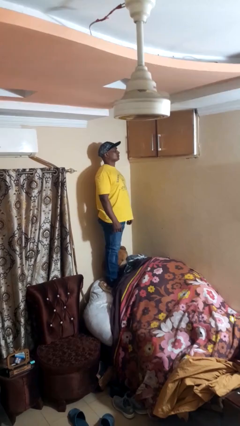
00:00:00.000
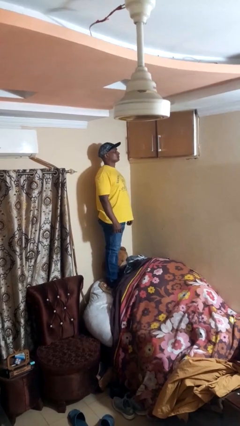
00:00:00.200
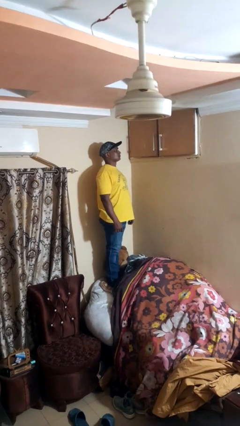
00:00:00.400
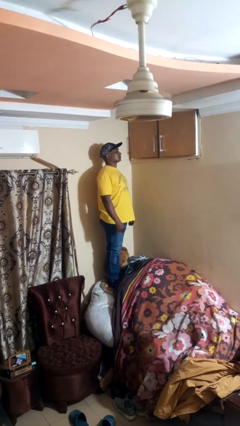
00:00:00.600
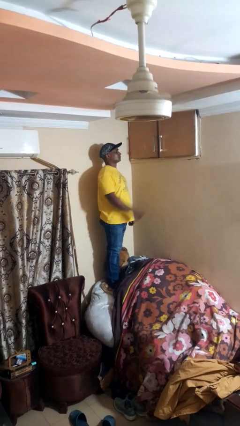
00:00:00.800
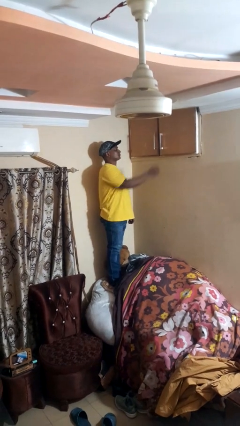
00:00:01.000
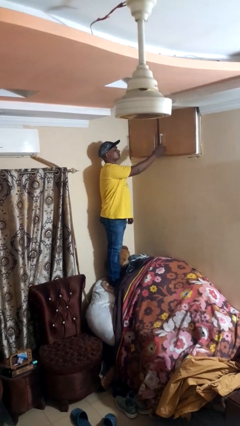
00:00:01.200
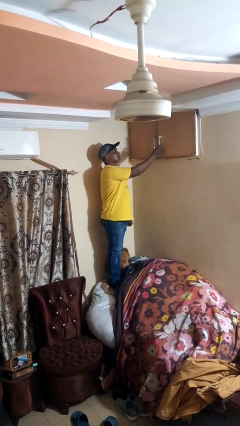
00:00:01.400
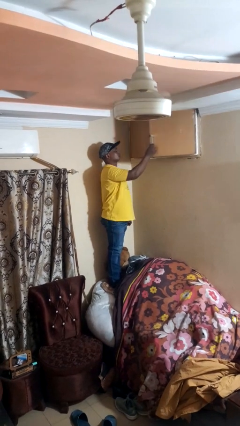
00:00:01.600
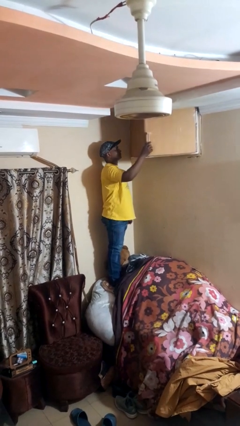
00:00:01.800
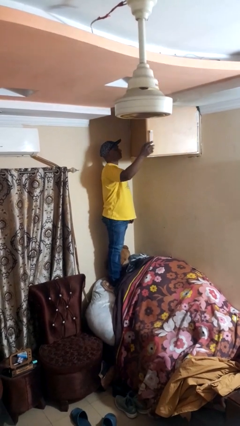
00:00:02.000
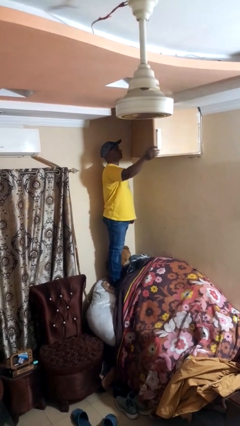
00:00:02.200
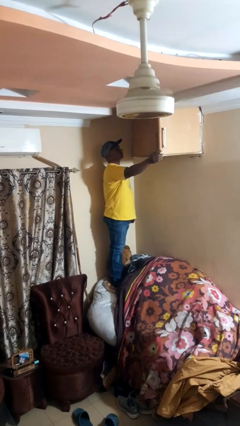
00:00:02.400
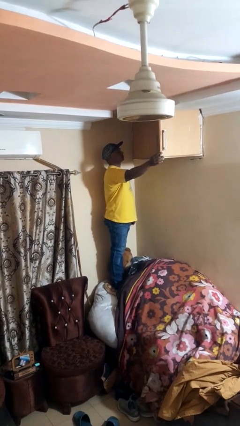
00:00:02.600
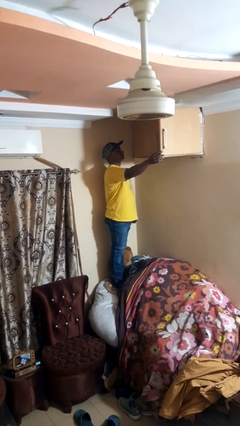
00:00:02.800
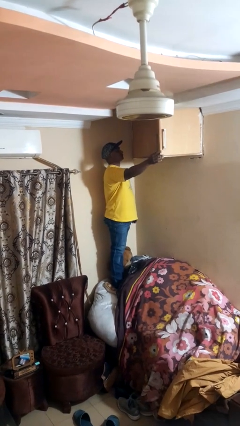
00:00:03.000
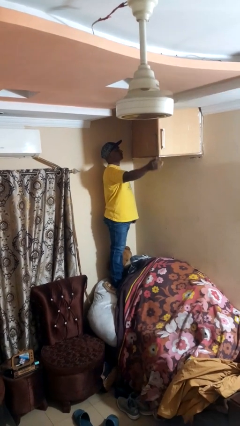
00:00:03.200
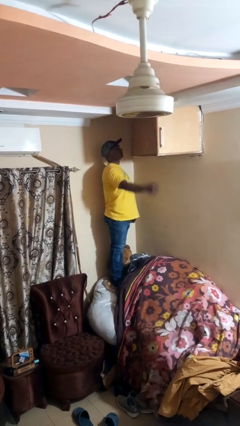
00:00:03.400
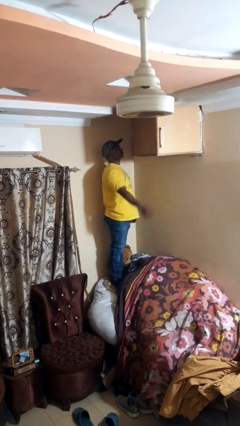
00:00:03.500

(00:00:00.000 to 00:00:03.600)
person opens closet door

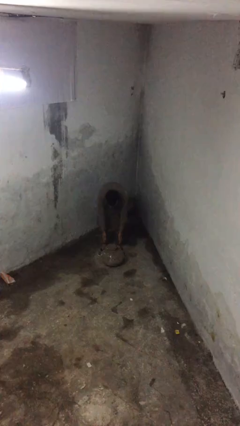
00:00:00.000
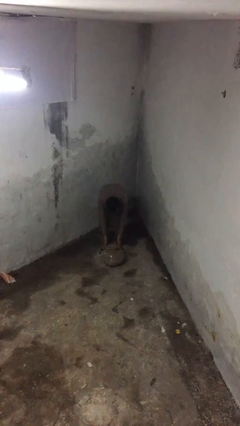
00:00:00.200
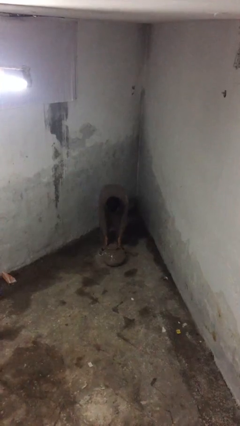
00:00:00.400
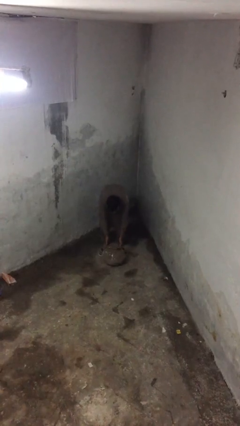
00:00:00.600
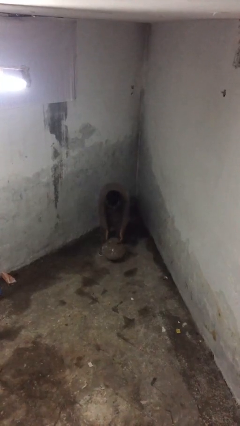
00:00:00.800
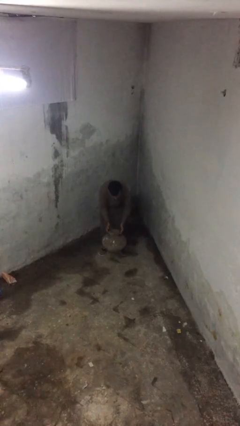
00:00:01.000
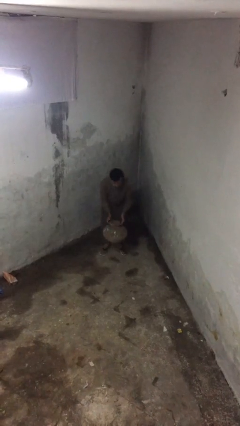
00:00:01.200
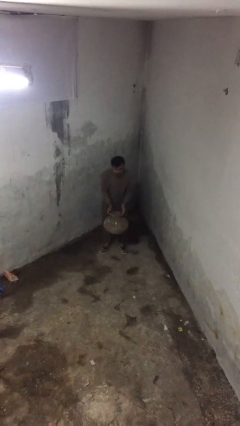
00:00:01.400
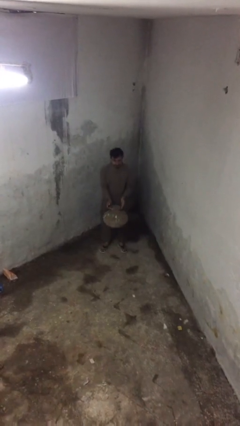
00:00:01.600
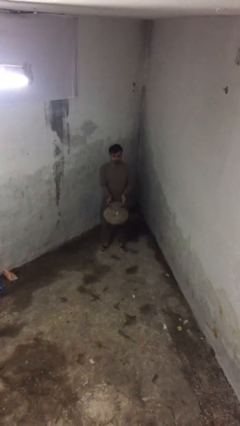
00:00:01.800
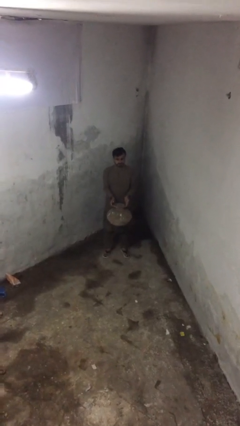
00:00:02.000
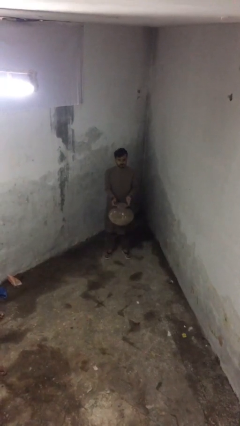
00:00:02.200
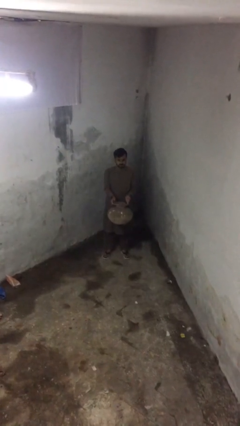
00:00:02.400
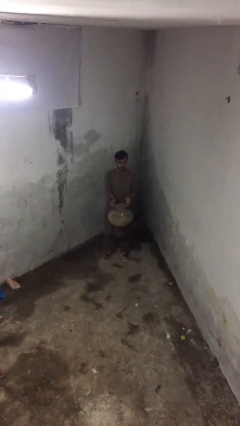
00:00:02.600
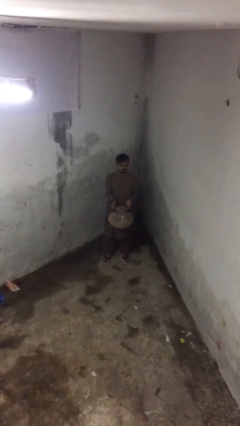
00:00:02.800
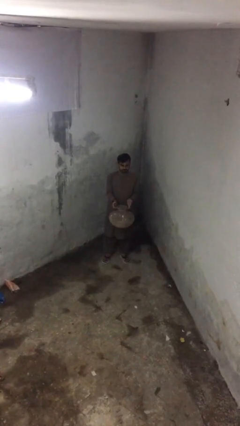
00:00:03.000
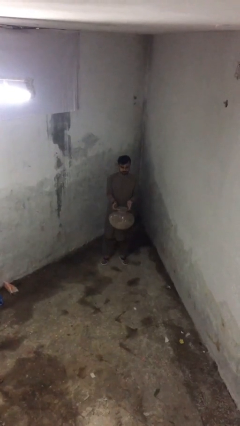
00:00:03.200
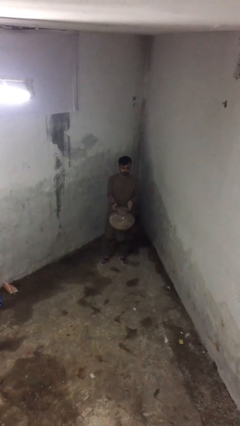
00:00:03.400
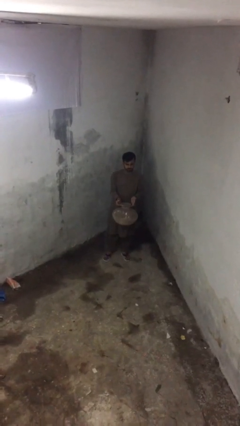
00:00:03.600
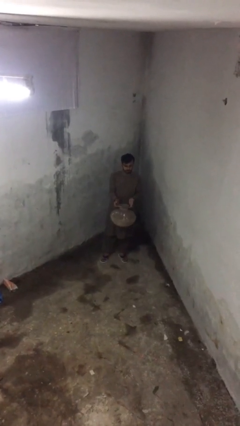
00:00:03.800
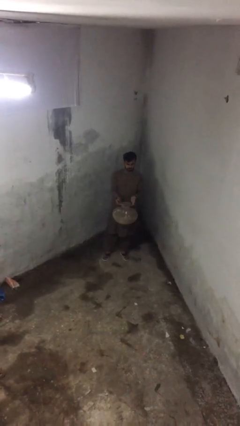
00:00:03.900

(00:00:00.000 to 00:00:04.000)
person picks up object from floor

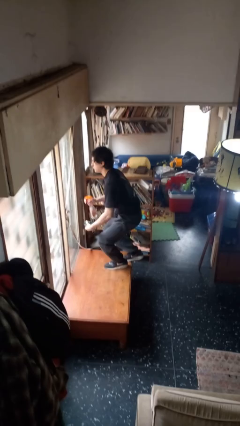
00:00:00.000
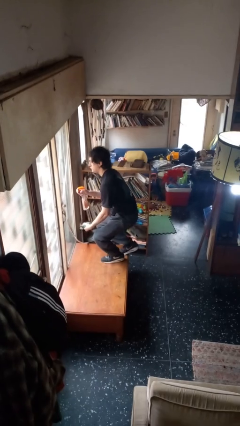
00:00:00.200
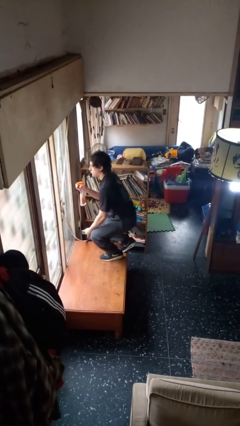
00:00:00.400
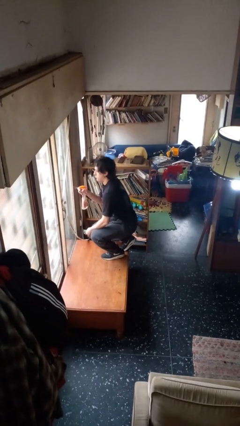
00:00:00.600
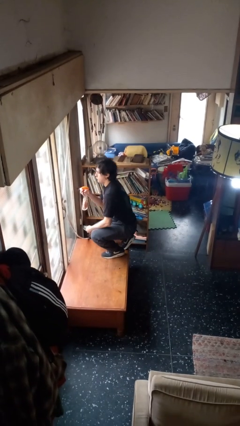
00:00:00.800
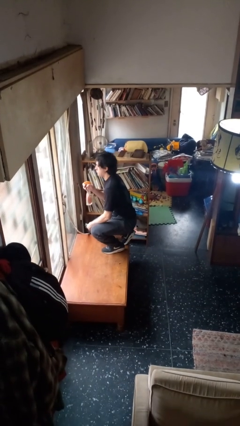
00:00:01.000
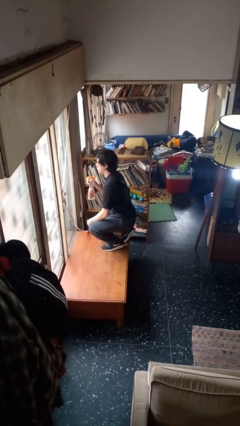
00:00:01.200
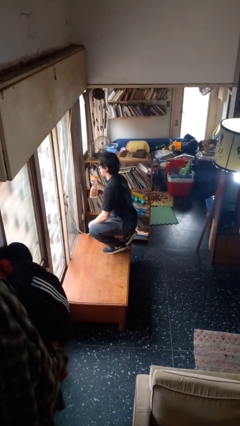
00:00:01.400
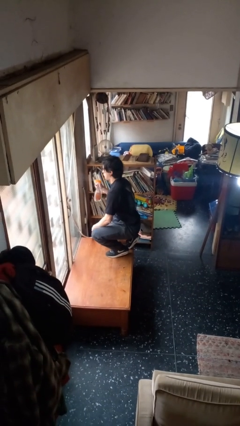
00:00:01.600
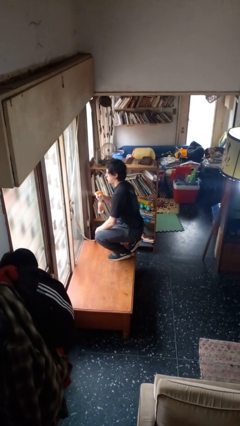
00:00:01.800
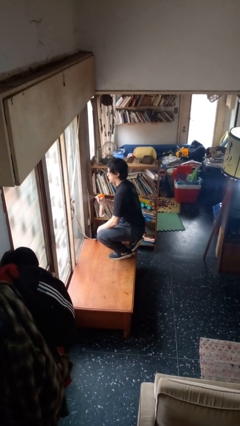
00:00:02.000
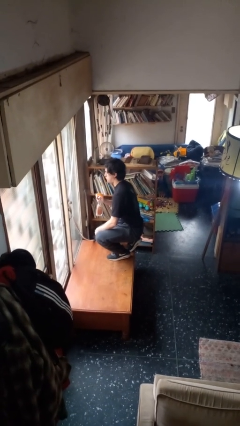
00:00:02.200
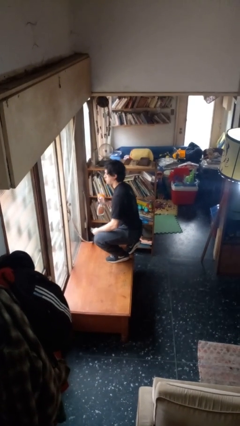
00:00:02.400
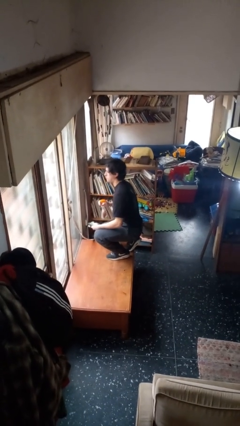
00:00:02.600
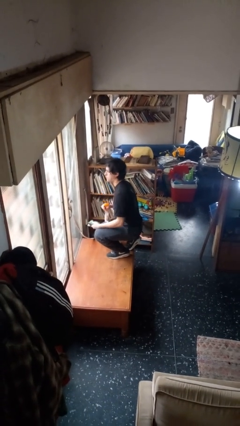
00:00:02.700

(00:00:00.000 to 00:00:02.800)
person sprays from bottle

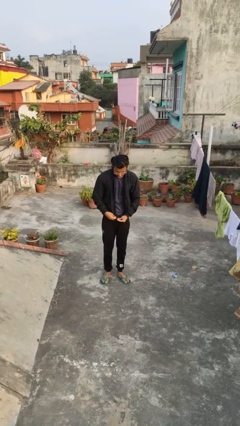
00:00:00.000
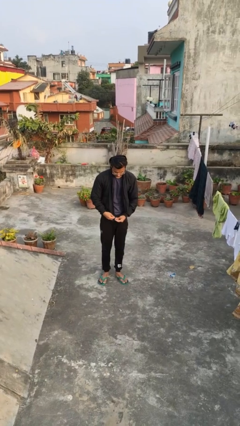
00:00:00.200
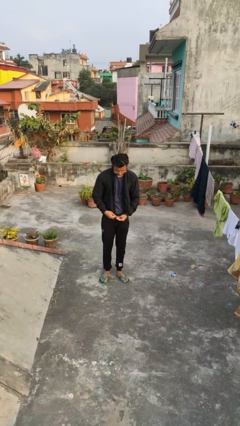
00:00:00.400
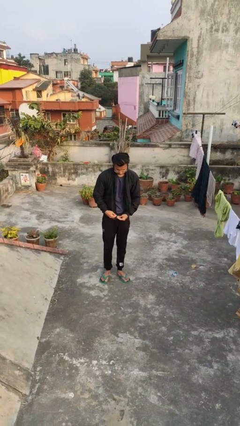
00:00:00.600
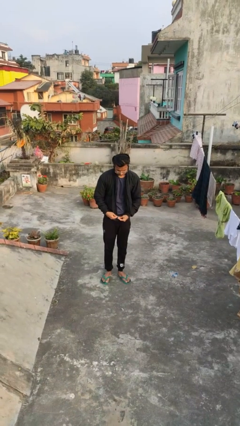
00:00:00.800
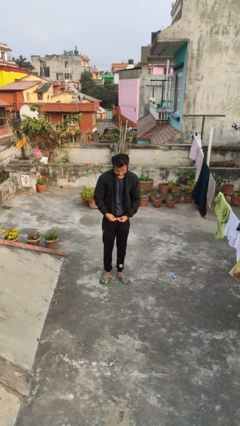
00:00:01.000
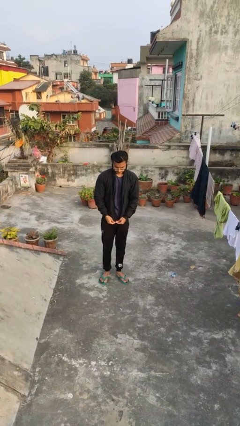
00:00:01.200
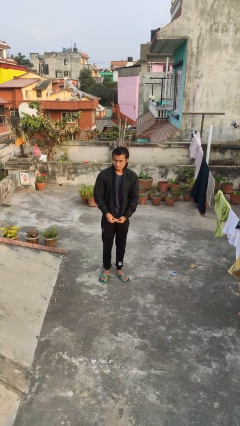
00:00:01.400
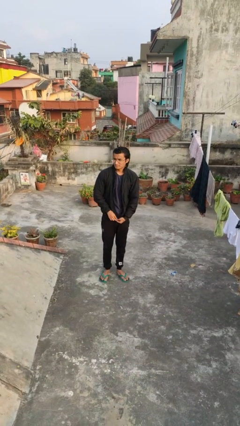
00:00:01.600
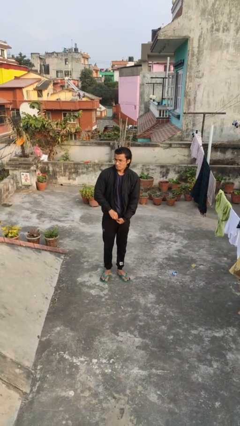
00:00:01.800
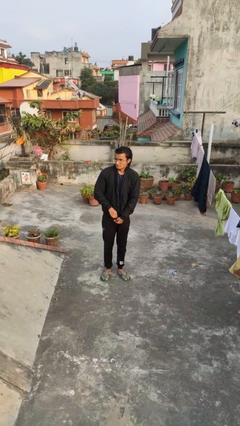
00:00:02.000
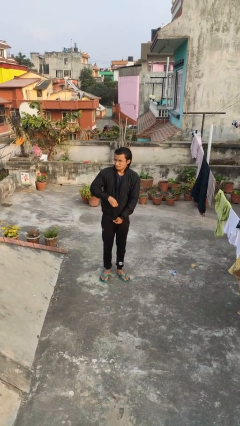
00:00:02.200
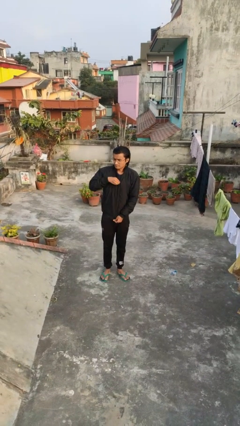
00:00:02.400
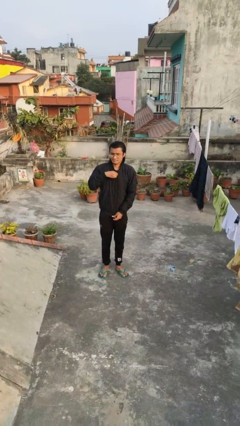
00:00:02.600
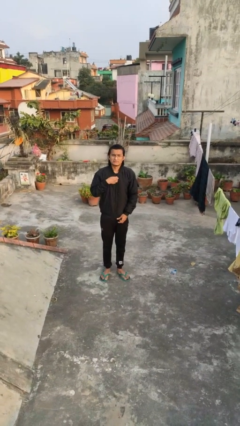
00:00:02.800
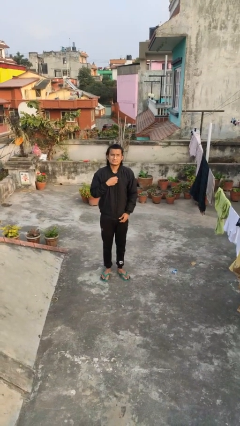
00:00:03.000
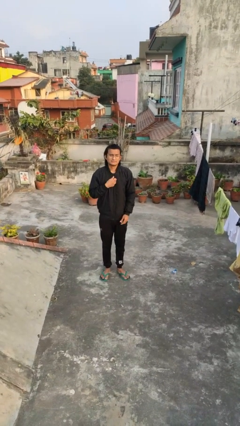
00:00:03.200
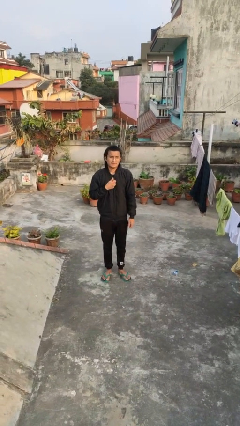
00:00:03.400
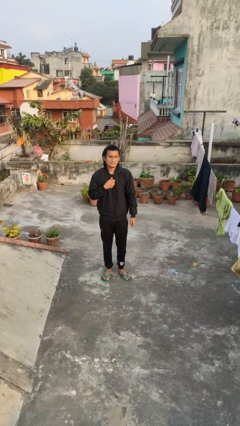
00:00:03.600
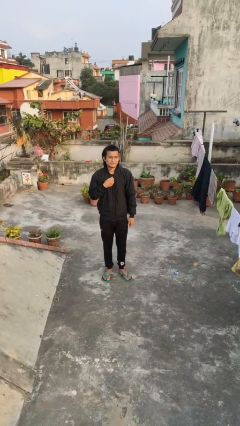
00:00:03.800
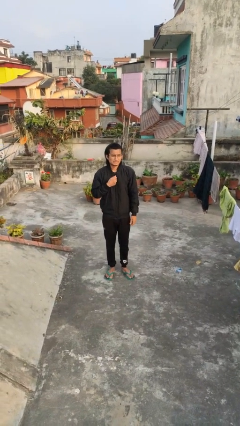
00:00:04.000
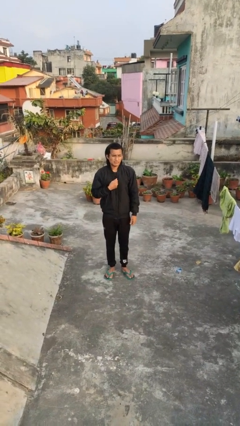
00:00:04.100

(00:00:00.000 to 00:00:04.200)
person zips up jacket

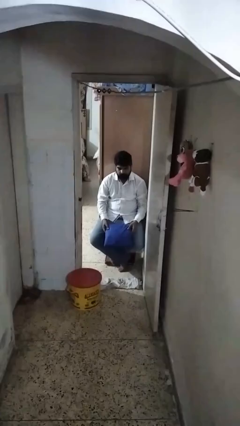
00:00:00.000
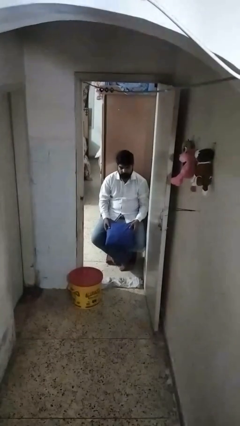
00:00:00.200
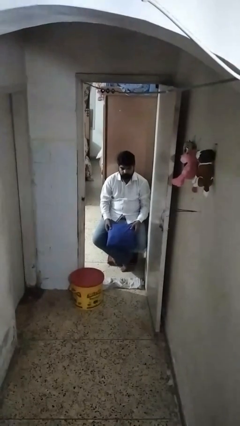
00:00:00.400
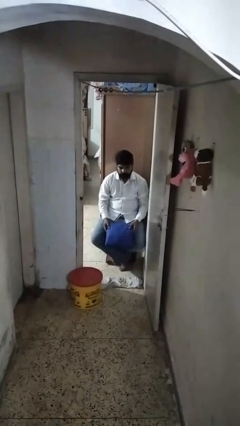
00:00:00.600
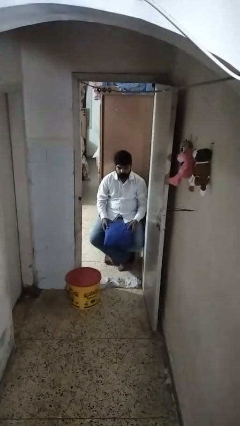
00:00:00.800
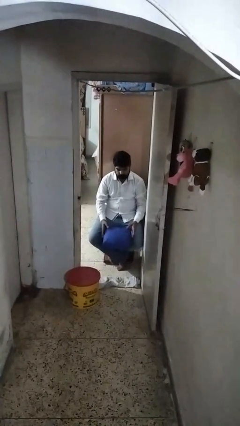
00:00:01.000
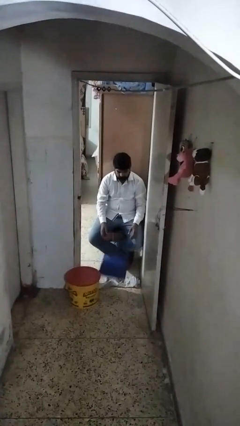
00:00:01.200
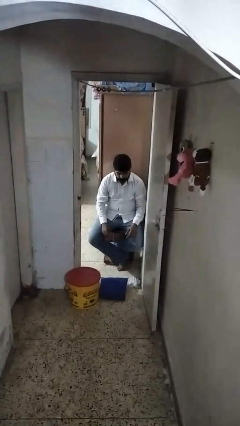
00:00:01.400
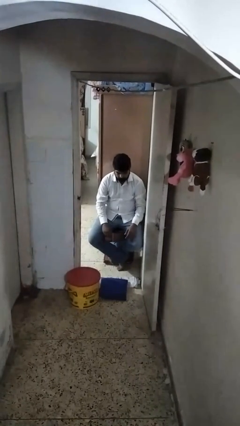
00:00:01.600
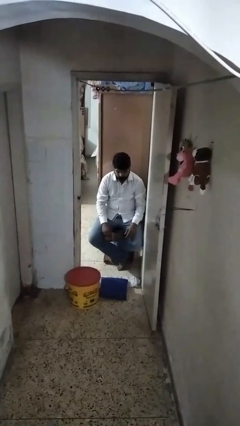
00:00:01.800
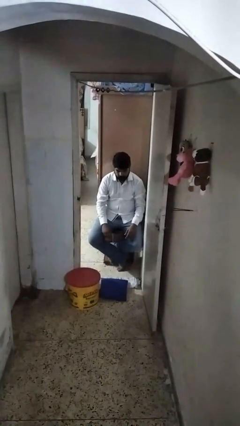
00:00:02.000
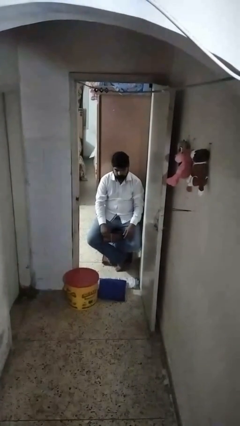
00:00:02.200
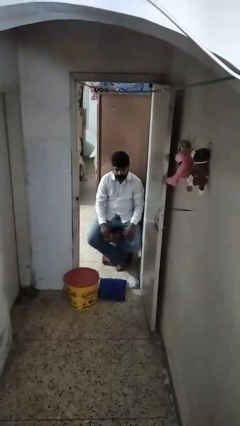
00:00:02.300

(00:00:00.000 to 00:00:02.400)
person drops object

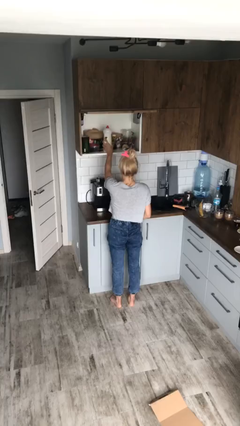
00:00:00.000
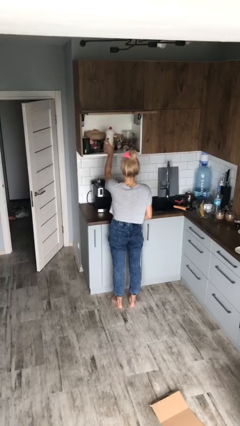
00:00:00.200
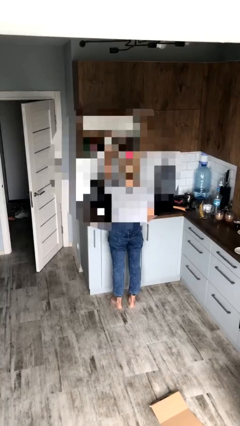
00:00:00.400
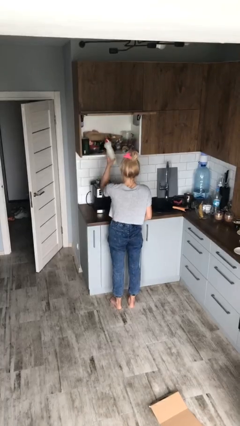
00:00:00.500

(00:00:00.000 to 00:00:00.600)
person picks up object from shelf
